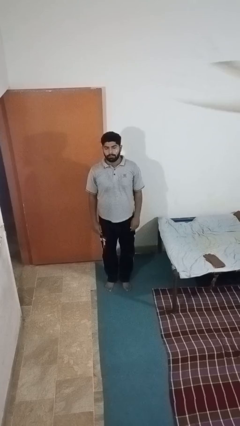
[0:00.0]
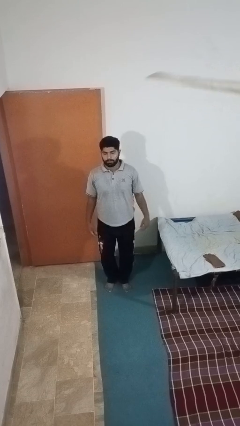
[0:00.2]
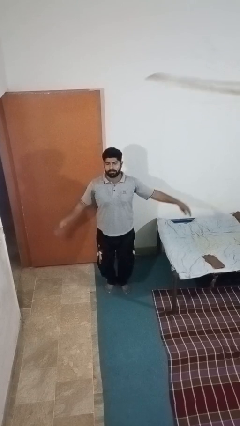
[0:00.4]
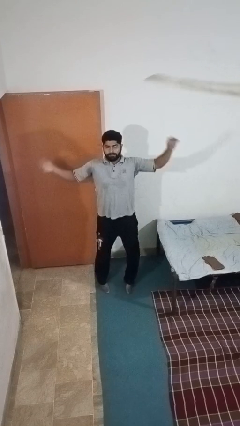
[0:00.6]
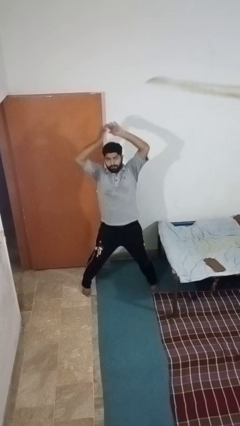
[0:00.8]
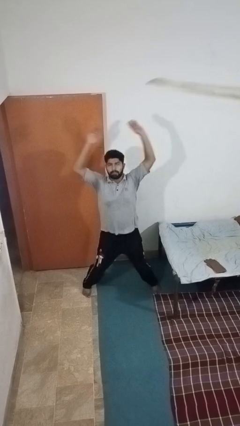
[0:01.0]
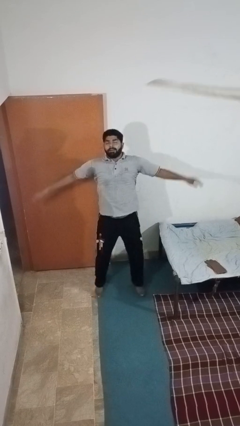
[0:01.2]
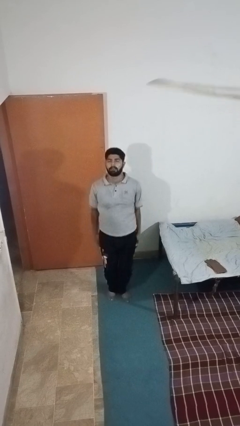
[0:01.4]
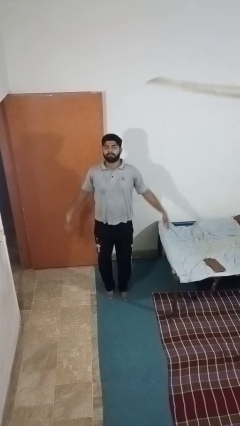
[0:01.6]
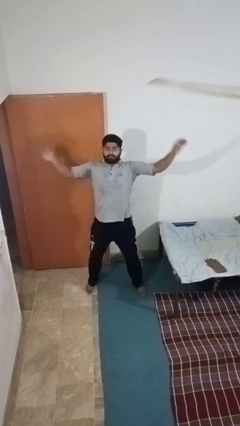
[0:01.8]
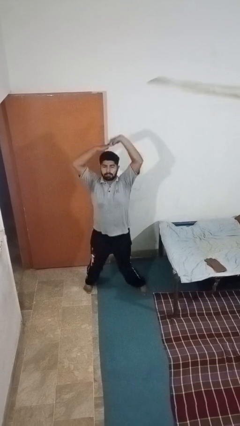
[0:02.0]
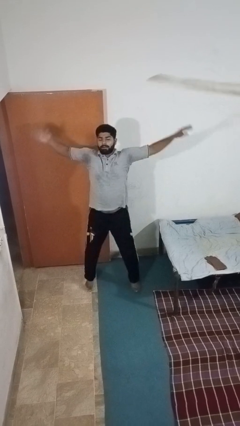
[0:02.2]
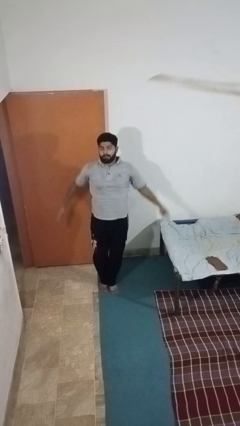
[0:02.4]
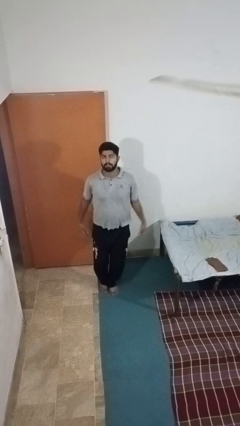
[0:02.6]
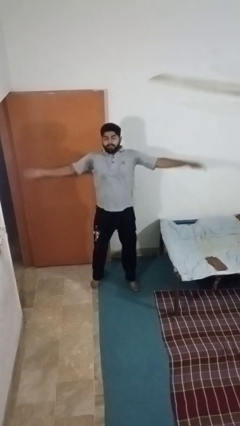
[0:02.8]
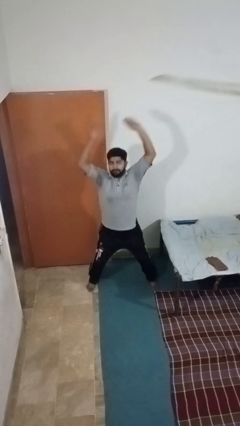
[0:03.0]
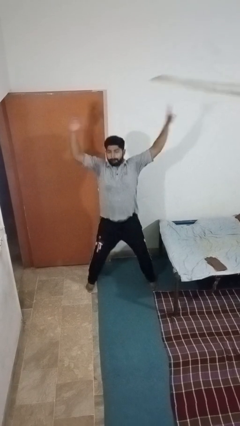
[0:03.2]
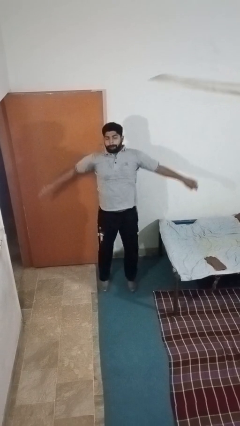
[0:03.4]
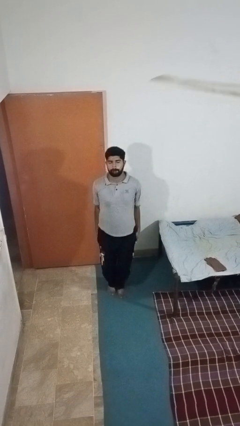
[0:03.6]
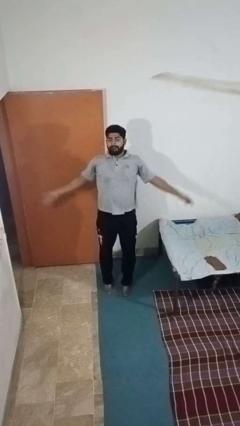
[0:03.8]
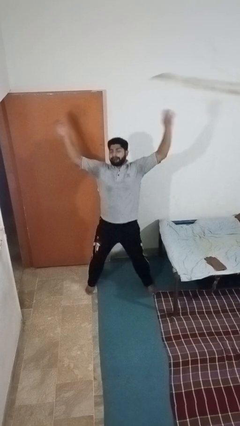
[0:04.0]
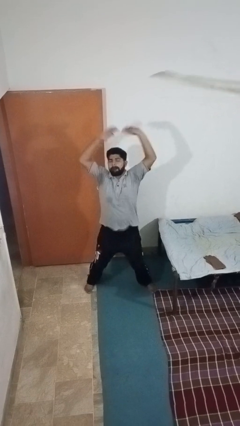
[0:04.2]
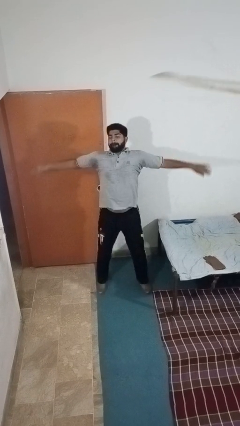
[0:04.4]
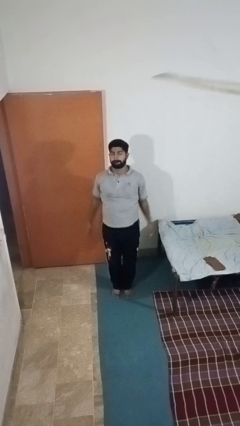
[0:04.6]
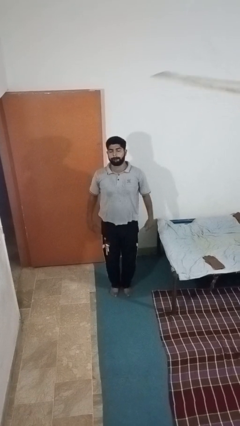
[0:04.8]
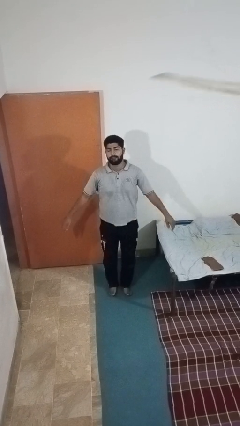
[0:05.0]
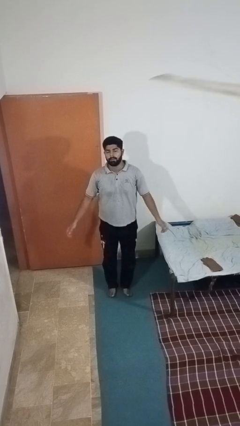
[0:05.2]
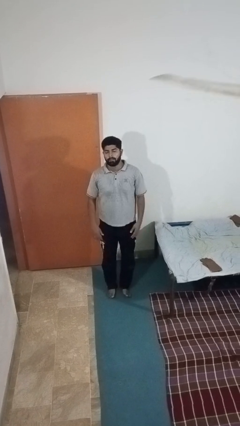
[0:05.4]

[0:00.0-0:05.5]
person exercises with jumping jacks

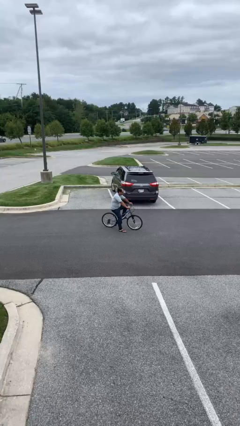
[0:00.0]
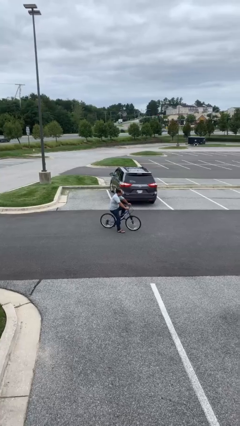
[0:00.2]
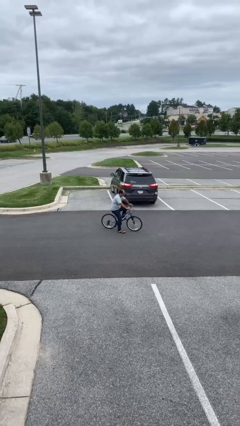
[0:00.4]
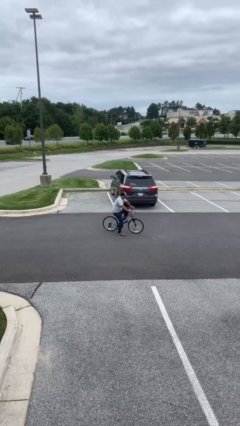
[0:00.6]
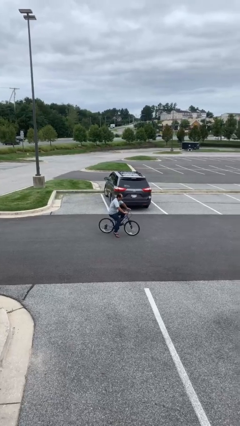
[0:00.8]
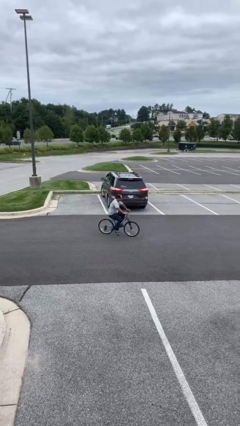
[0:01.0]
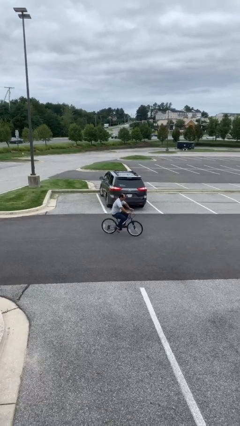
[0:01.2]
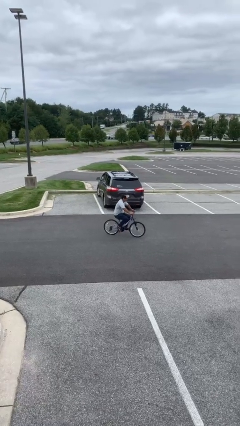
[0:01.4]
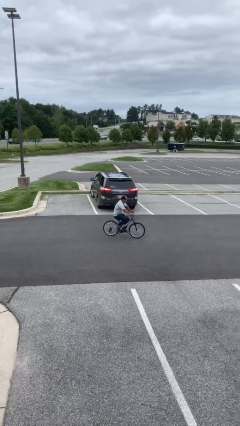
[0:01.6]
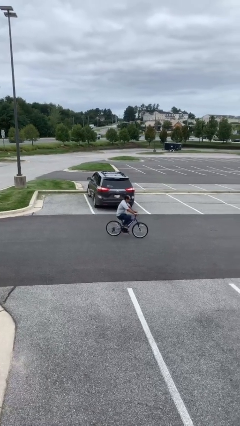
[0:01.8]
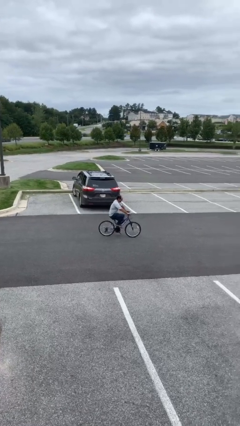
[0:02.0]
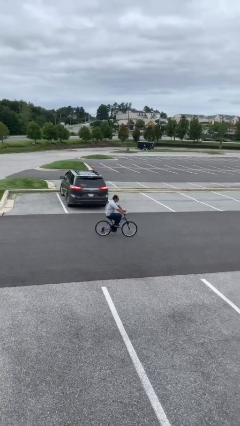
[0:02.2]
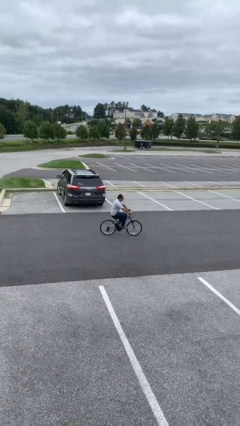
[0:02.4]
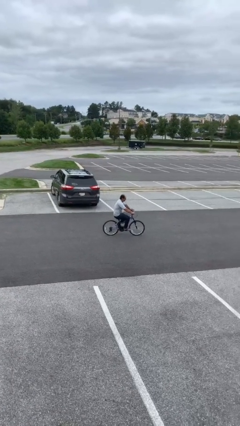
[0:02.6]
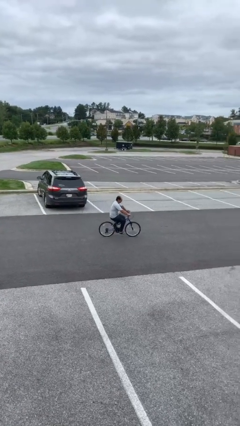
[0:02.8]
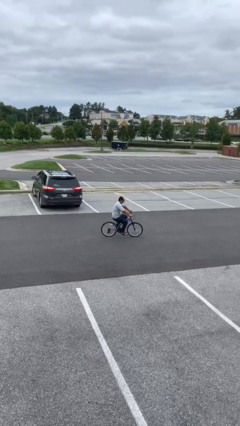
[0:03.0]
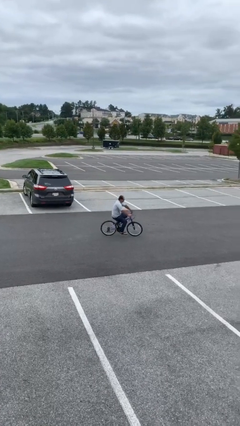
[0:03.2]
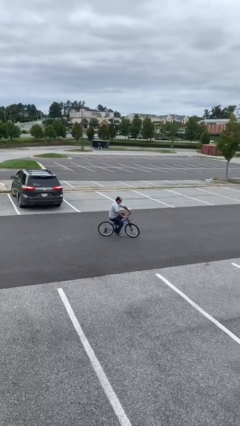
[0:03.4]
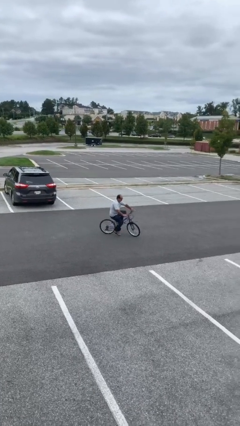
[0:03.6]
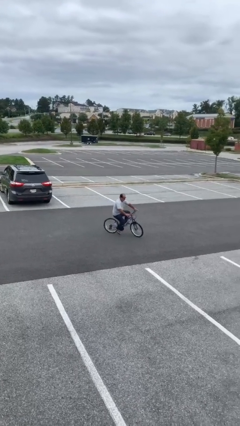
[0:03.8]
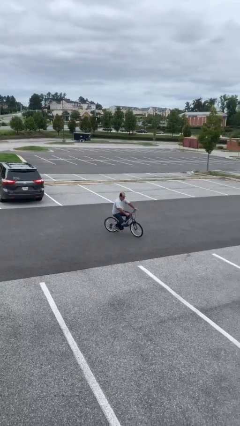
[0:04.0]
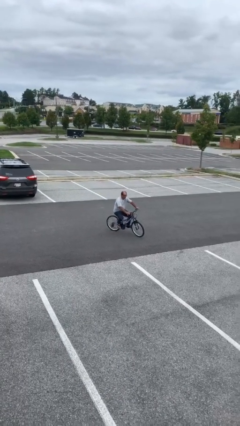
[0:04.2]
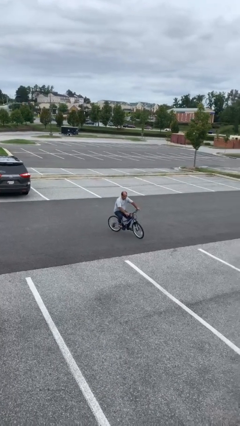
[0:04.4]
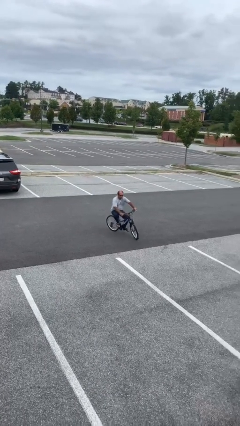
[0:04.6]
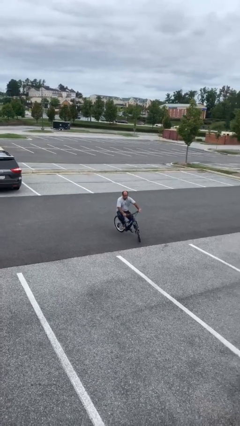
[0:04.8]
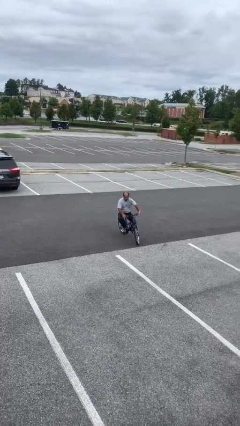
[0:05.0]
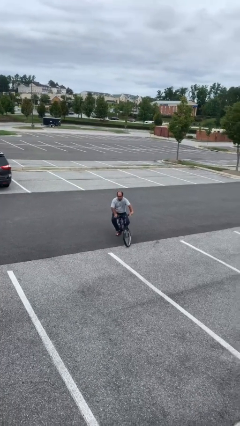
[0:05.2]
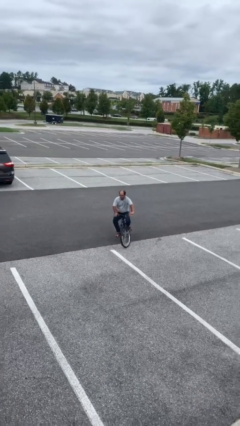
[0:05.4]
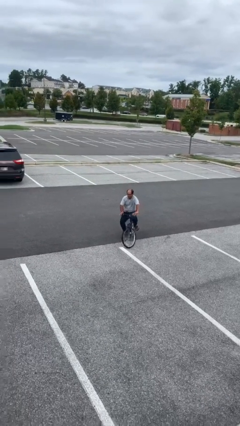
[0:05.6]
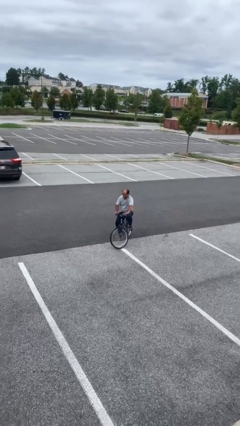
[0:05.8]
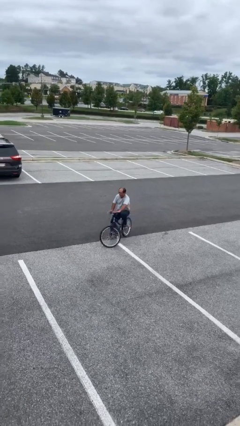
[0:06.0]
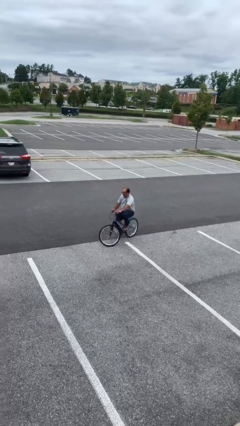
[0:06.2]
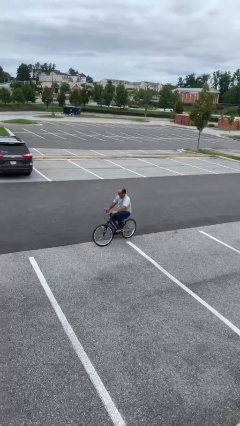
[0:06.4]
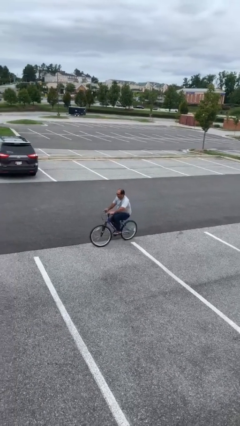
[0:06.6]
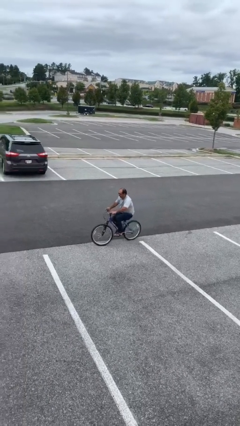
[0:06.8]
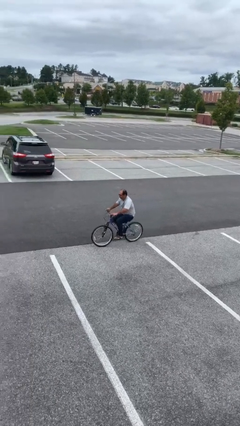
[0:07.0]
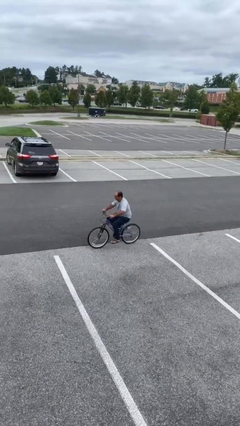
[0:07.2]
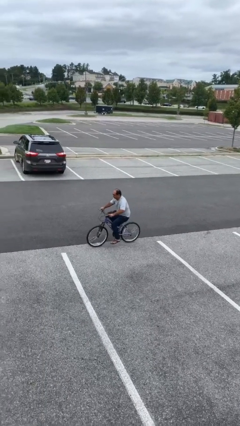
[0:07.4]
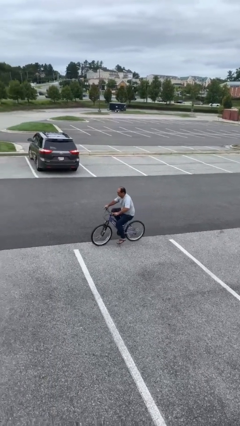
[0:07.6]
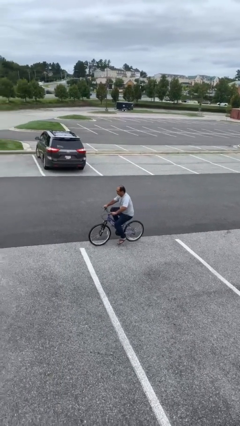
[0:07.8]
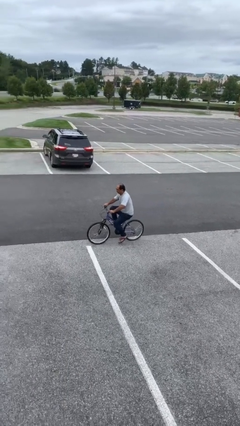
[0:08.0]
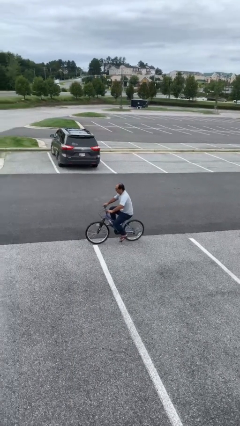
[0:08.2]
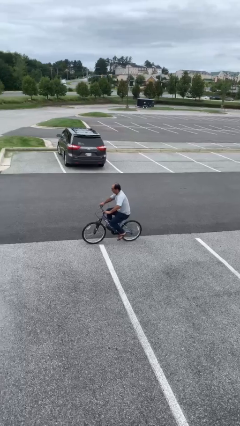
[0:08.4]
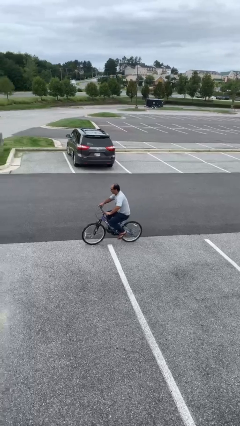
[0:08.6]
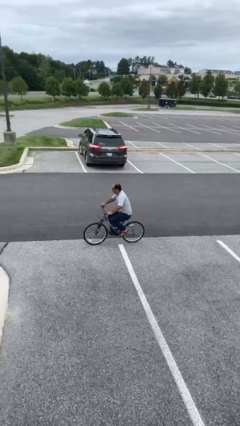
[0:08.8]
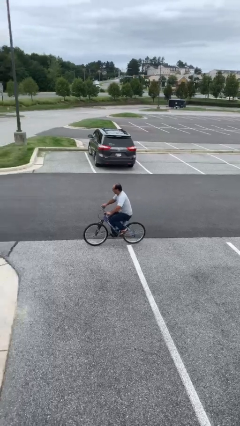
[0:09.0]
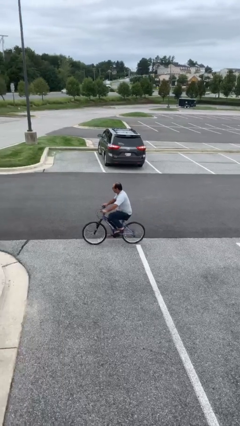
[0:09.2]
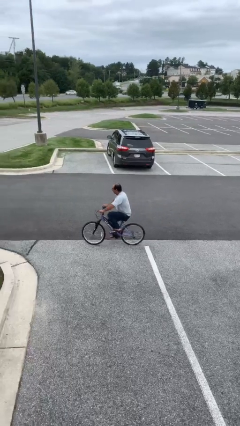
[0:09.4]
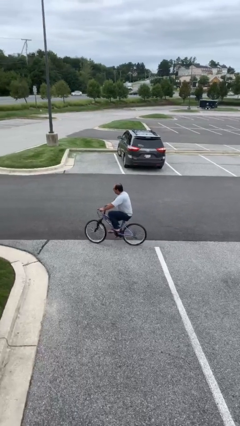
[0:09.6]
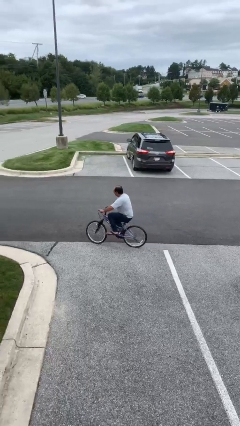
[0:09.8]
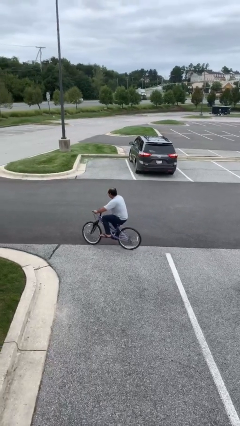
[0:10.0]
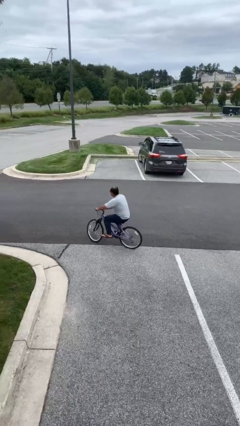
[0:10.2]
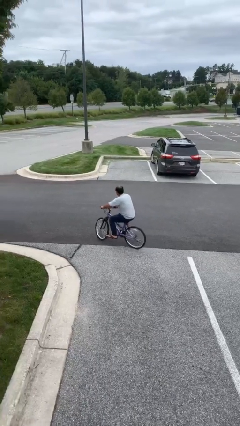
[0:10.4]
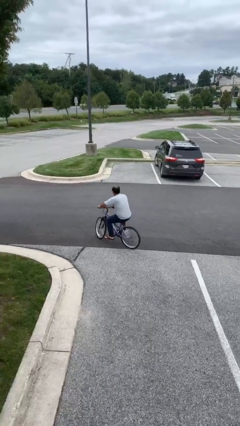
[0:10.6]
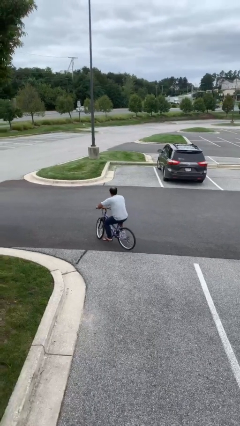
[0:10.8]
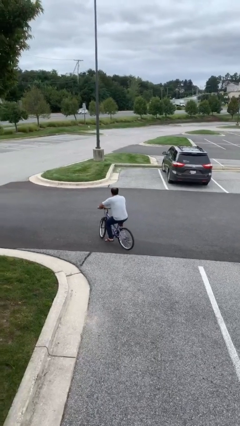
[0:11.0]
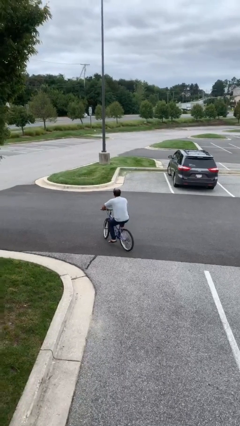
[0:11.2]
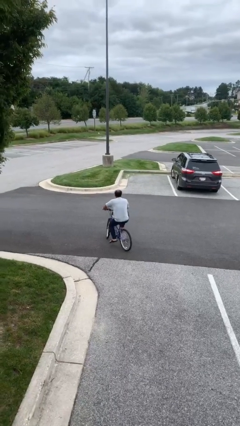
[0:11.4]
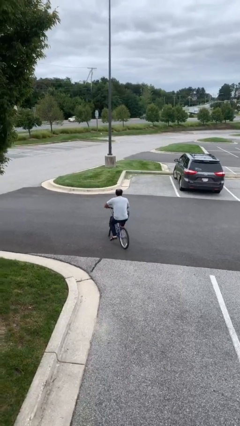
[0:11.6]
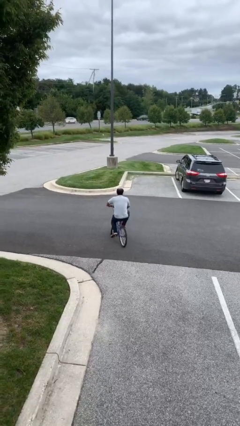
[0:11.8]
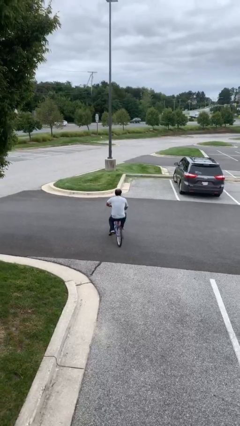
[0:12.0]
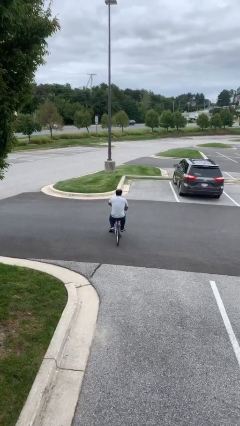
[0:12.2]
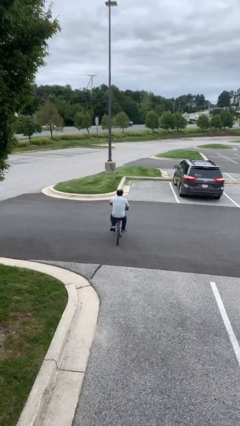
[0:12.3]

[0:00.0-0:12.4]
person rides bicycle

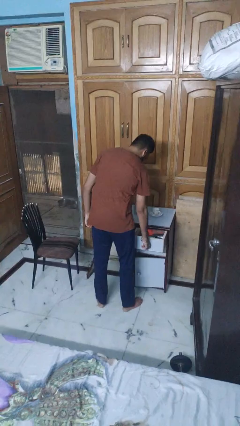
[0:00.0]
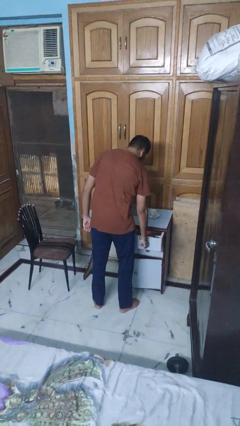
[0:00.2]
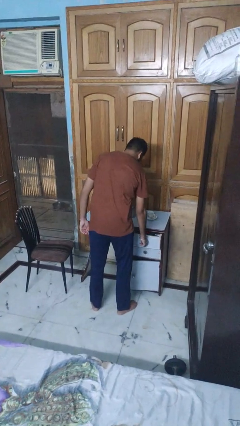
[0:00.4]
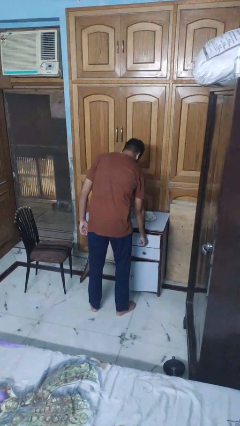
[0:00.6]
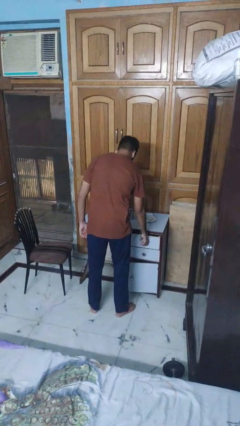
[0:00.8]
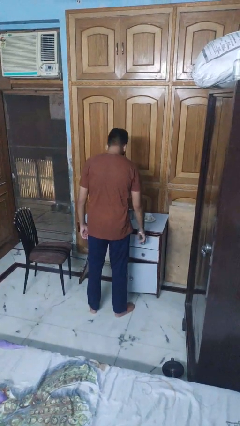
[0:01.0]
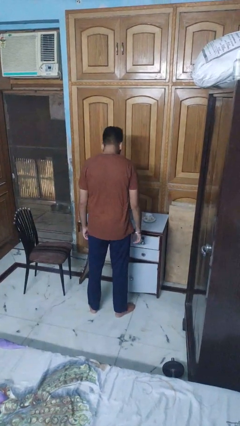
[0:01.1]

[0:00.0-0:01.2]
person closes kitchen drawer
